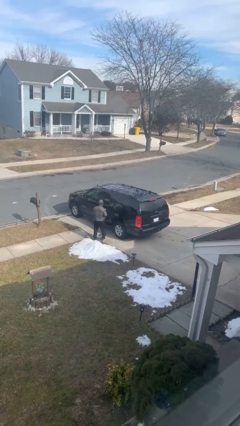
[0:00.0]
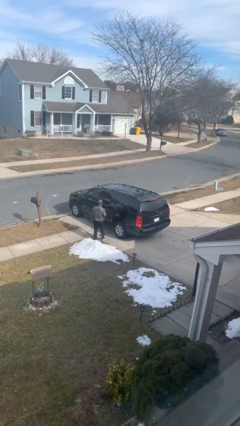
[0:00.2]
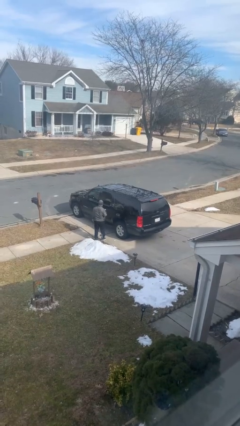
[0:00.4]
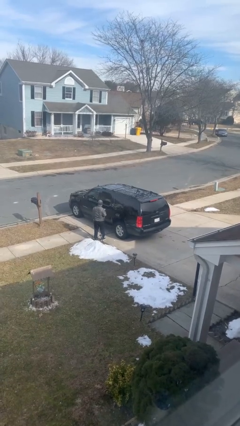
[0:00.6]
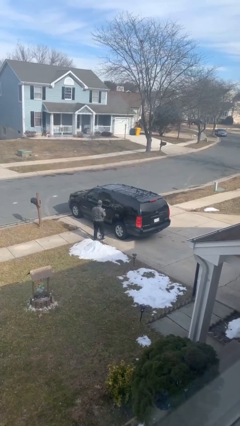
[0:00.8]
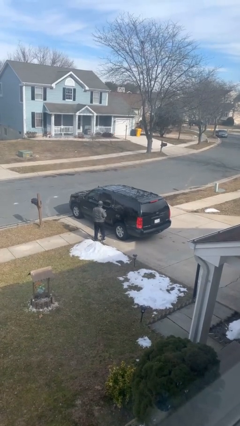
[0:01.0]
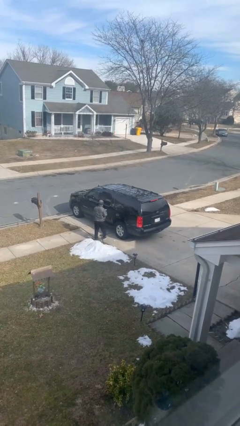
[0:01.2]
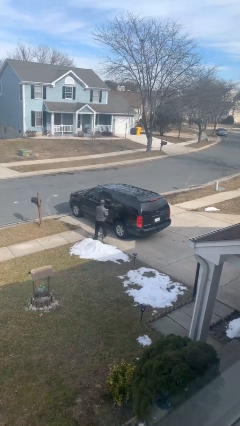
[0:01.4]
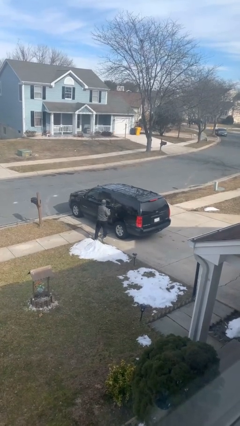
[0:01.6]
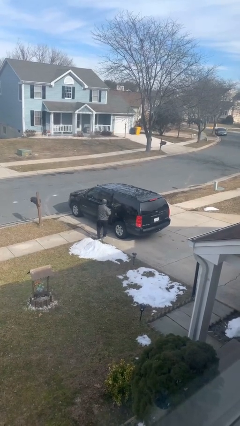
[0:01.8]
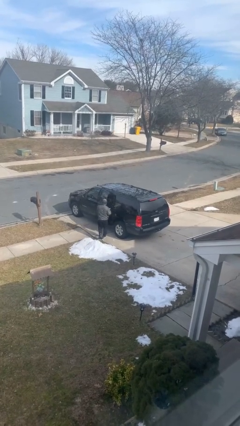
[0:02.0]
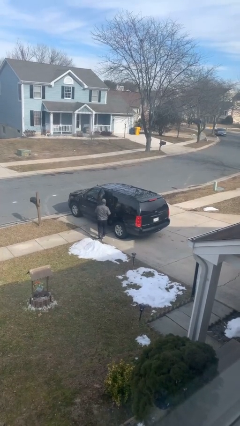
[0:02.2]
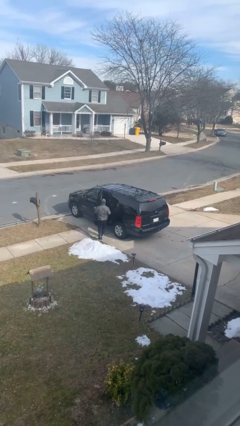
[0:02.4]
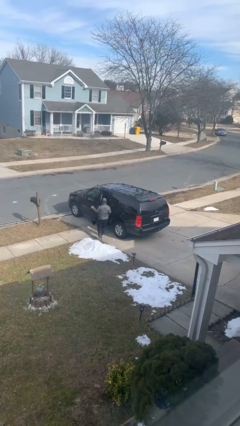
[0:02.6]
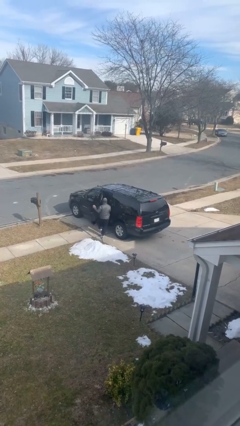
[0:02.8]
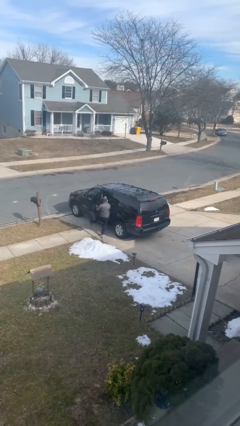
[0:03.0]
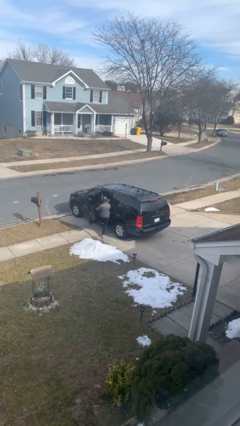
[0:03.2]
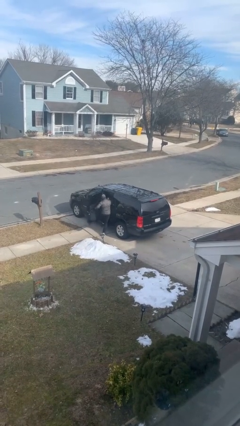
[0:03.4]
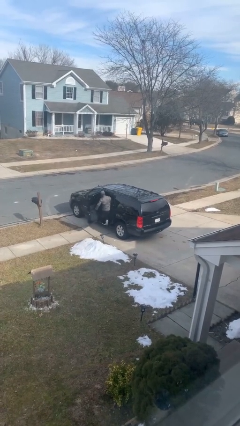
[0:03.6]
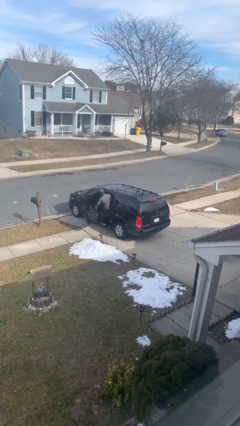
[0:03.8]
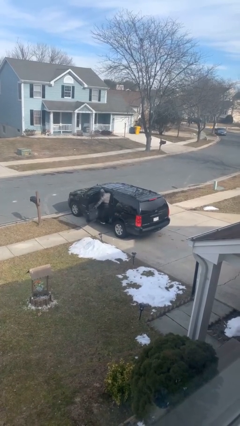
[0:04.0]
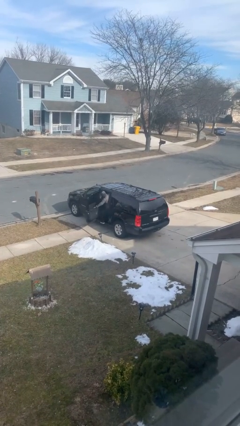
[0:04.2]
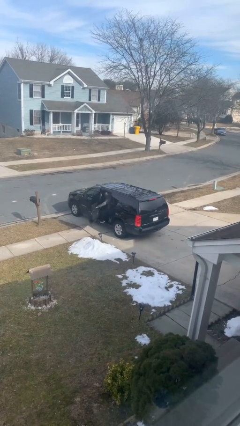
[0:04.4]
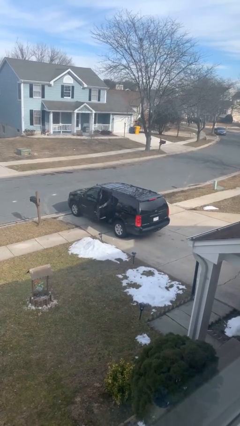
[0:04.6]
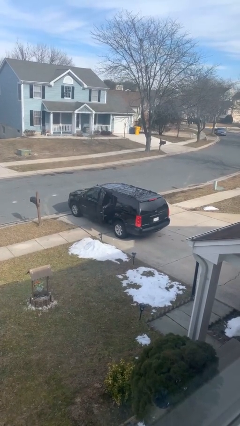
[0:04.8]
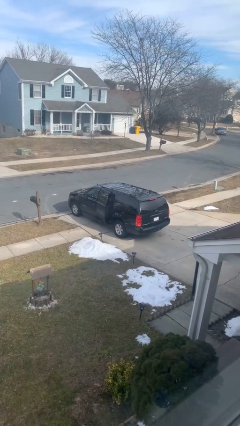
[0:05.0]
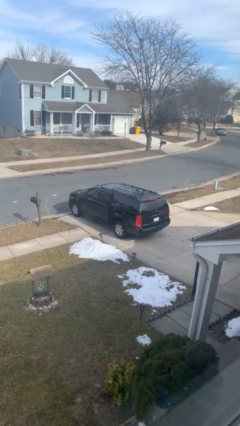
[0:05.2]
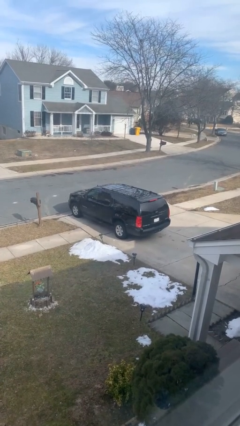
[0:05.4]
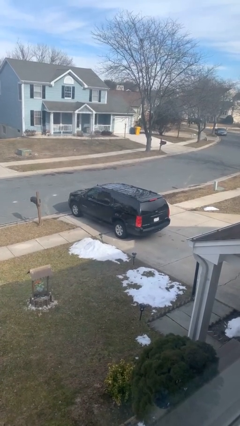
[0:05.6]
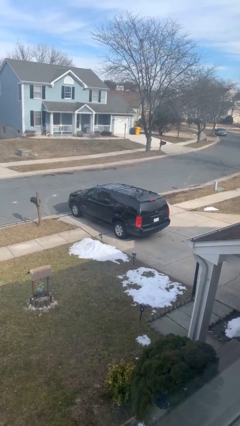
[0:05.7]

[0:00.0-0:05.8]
car picks up person

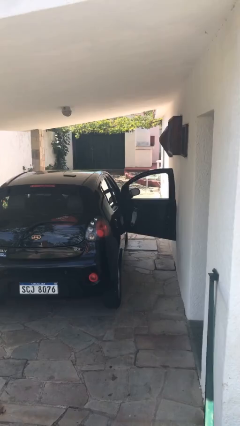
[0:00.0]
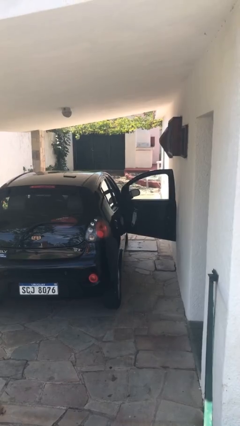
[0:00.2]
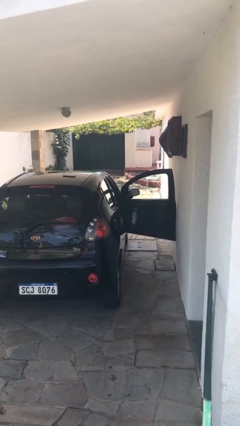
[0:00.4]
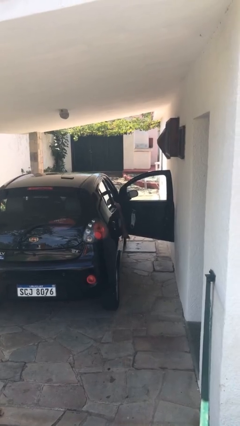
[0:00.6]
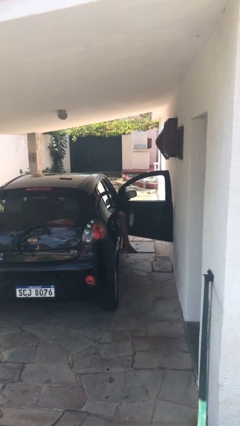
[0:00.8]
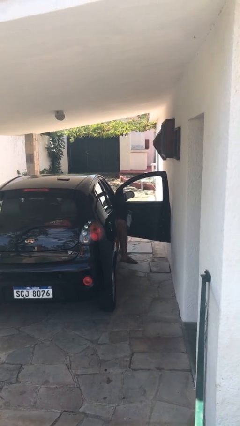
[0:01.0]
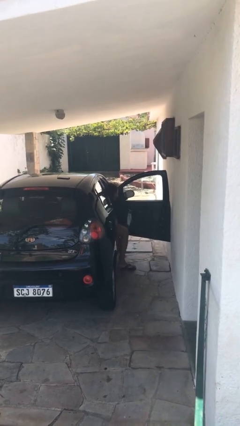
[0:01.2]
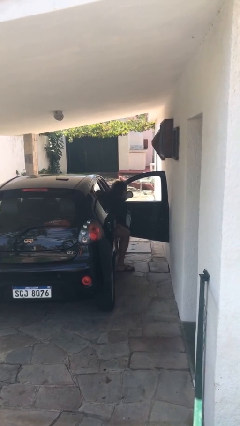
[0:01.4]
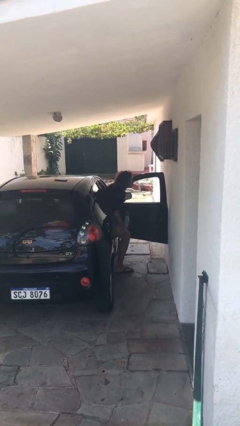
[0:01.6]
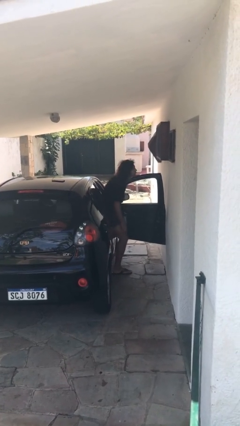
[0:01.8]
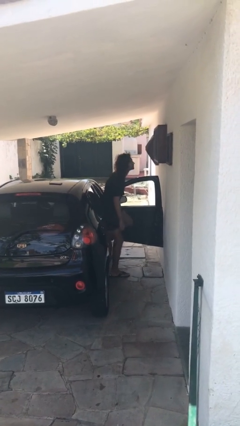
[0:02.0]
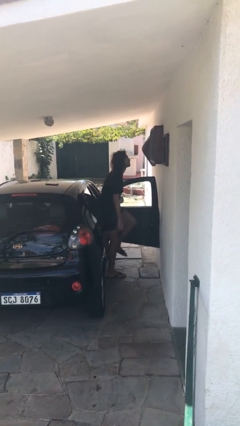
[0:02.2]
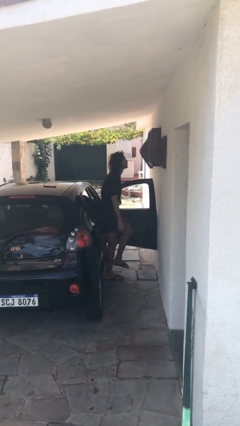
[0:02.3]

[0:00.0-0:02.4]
person exits car

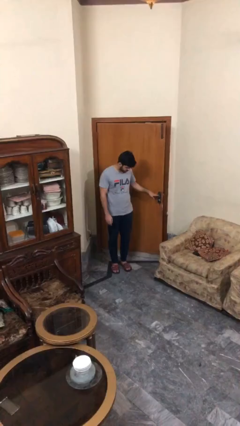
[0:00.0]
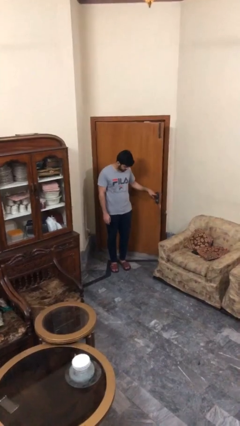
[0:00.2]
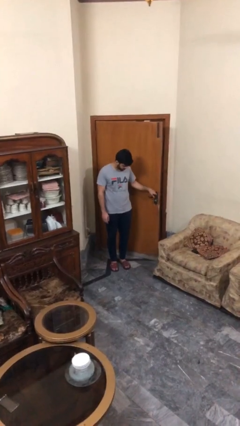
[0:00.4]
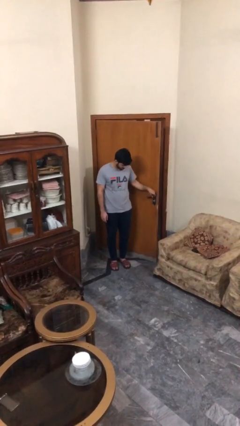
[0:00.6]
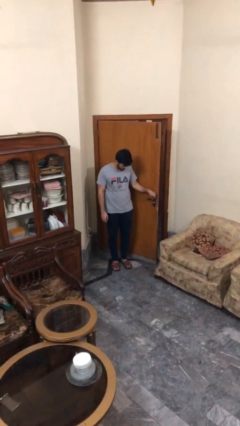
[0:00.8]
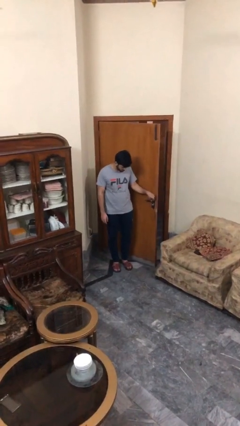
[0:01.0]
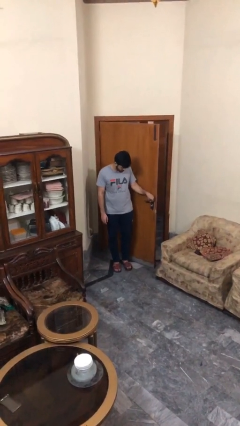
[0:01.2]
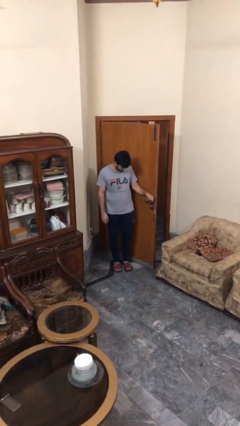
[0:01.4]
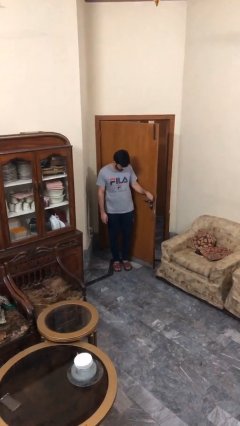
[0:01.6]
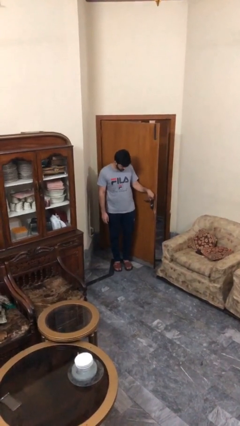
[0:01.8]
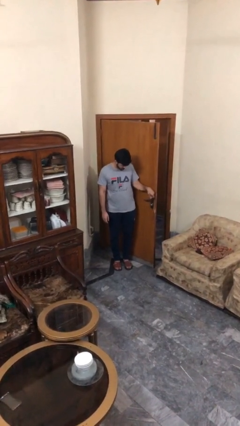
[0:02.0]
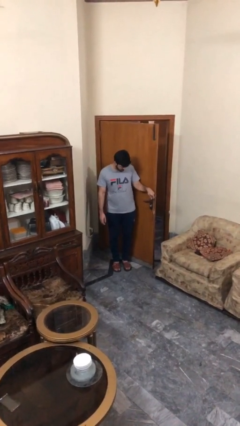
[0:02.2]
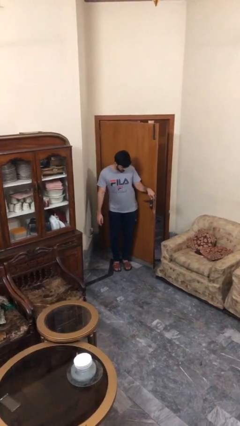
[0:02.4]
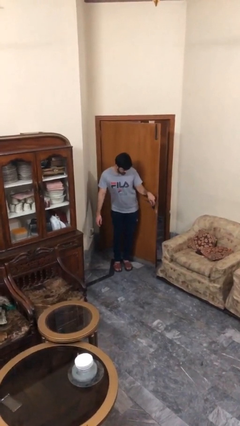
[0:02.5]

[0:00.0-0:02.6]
person opens facility door

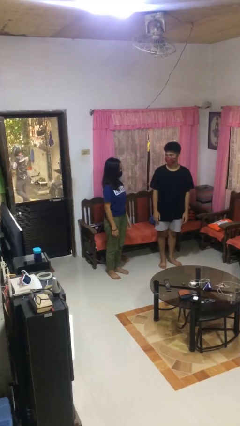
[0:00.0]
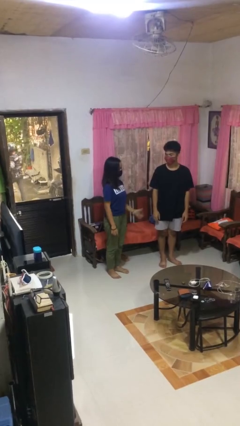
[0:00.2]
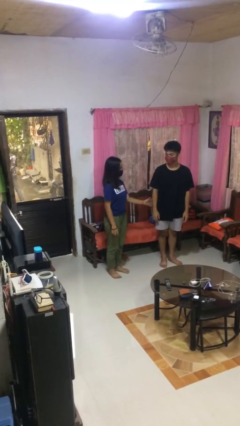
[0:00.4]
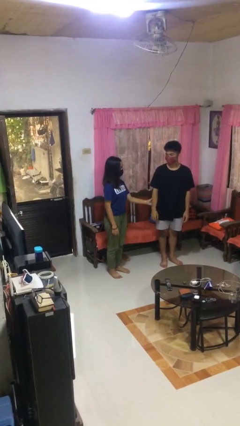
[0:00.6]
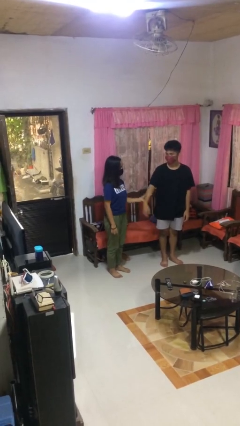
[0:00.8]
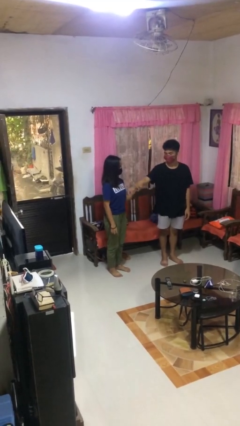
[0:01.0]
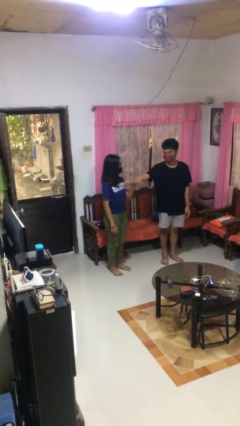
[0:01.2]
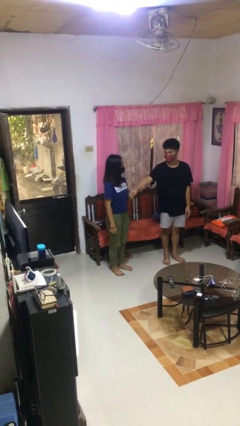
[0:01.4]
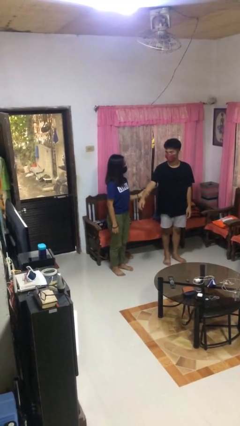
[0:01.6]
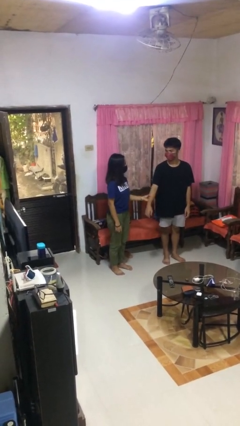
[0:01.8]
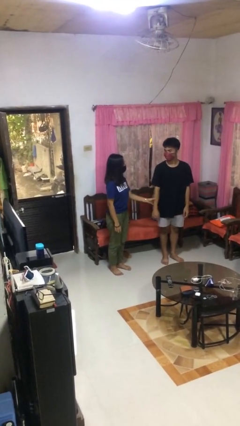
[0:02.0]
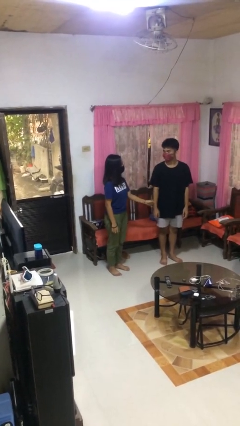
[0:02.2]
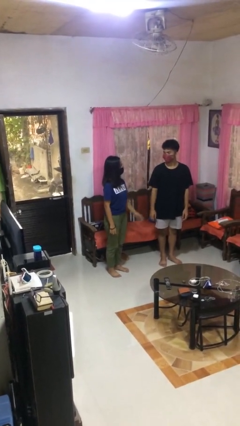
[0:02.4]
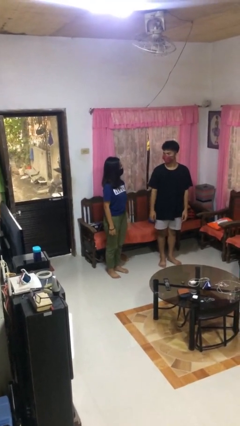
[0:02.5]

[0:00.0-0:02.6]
person grabs person by forearm

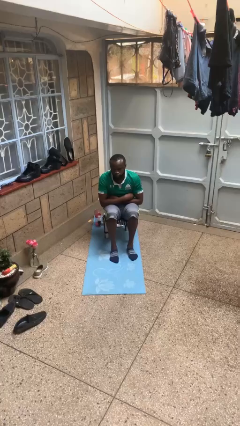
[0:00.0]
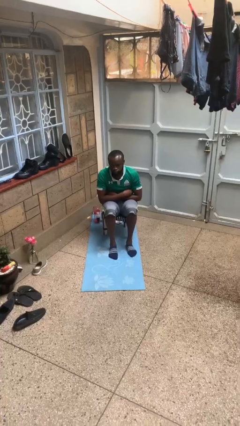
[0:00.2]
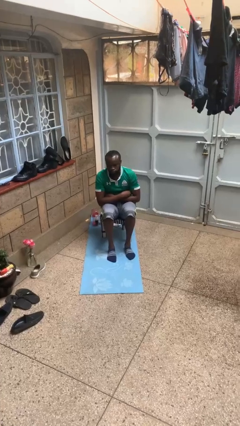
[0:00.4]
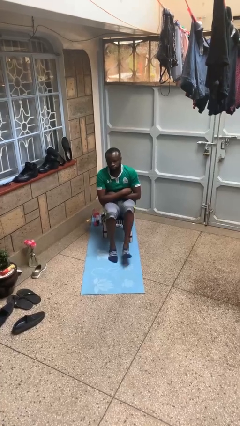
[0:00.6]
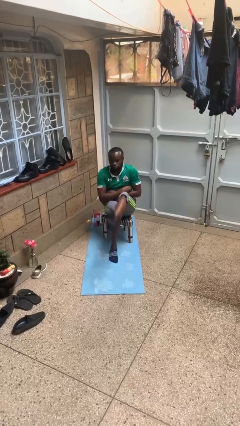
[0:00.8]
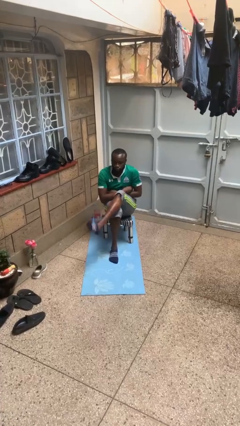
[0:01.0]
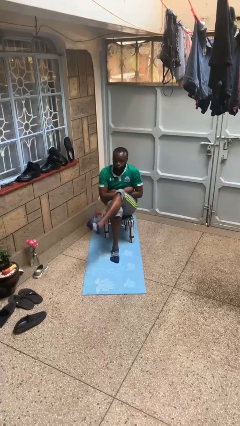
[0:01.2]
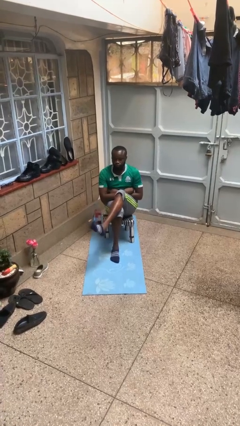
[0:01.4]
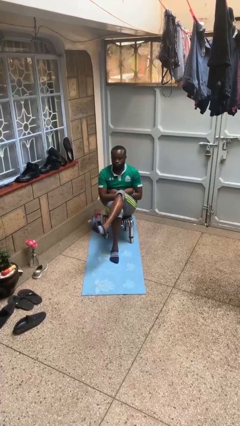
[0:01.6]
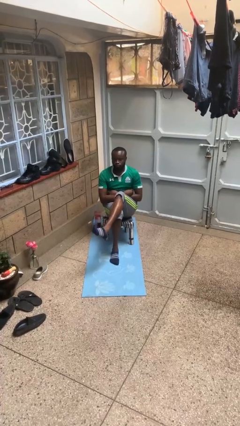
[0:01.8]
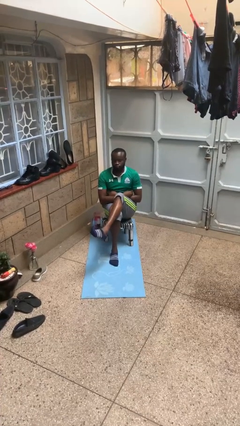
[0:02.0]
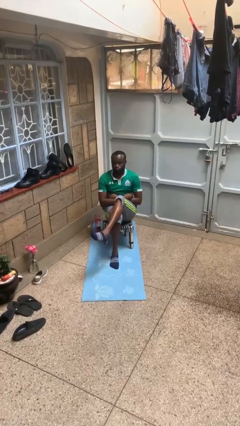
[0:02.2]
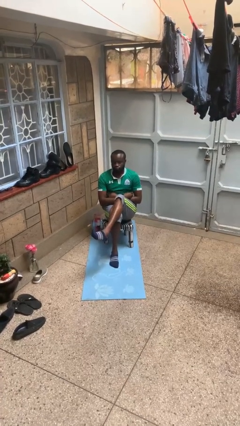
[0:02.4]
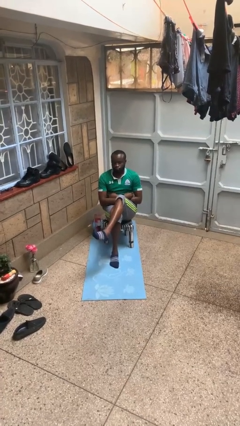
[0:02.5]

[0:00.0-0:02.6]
person crosses legs

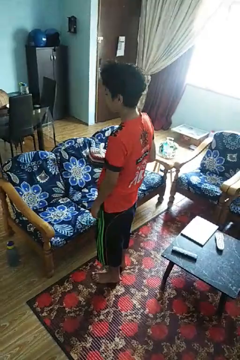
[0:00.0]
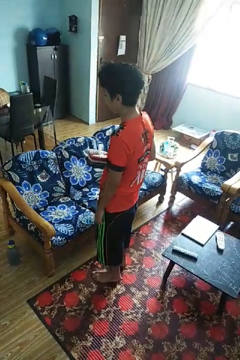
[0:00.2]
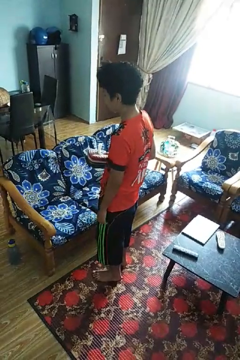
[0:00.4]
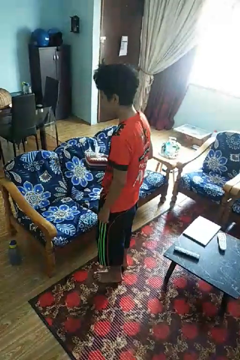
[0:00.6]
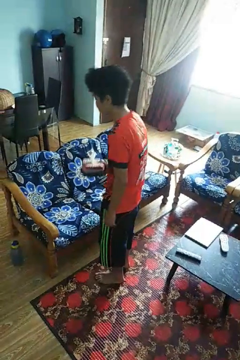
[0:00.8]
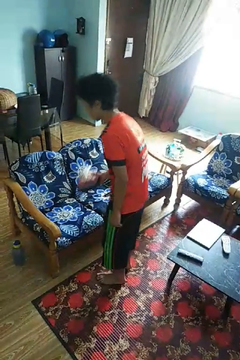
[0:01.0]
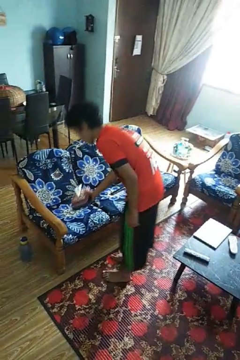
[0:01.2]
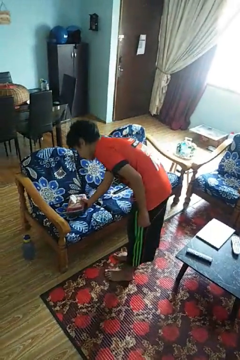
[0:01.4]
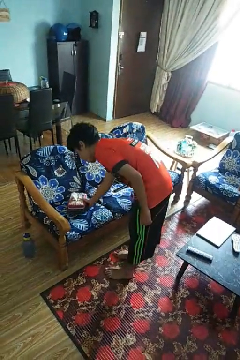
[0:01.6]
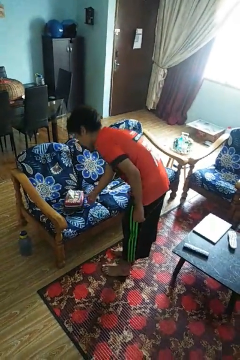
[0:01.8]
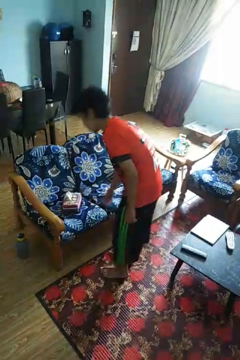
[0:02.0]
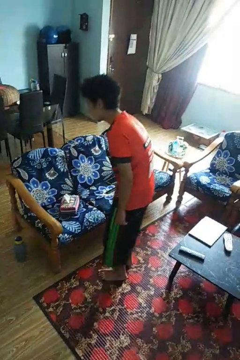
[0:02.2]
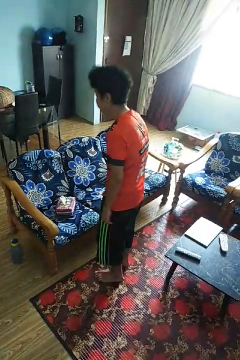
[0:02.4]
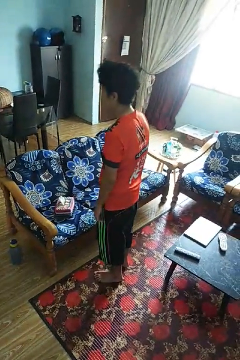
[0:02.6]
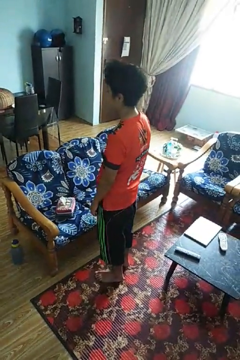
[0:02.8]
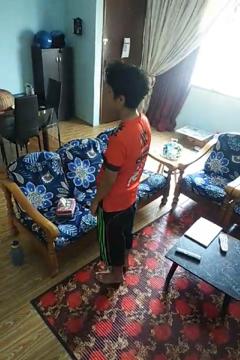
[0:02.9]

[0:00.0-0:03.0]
person puts down object on couch
